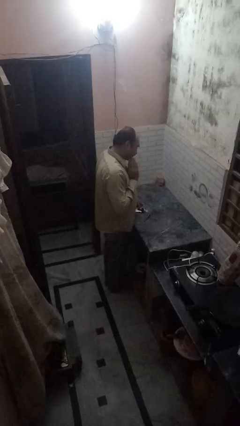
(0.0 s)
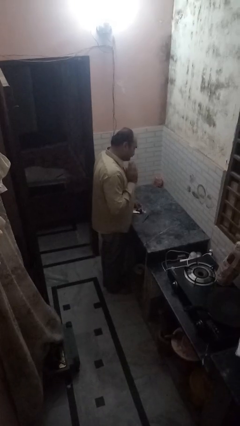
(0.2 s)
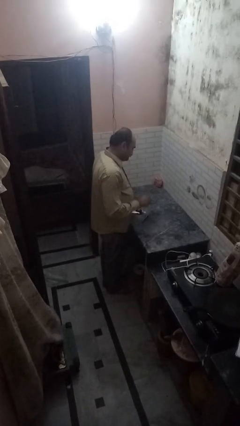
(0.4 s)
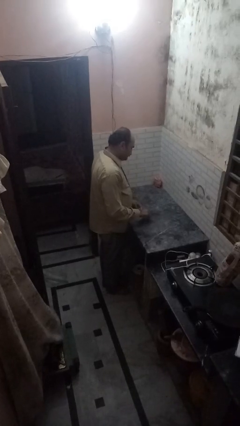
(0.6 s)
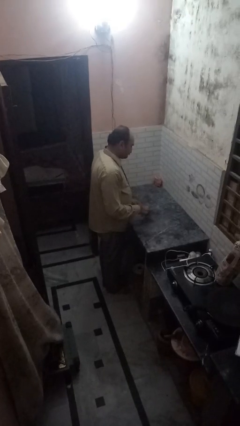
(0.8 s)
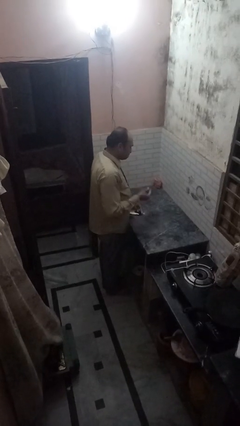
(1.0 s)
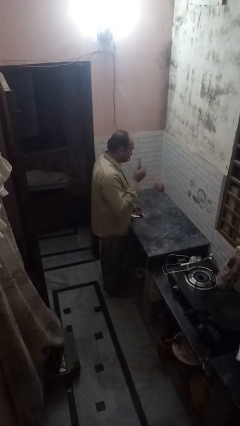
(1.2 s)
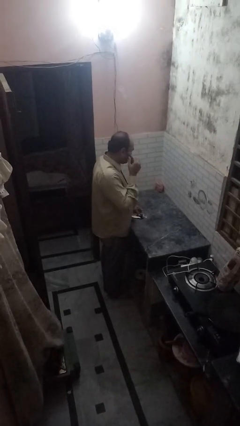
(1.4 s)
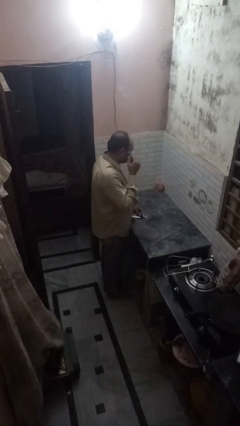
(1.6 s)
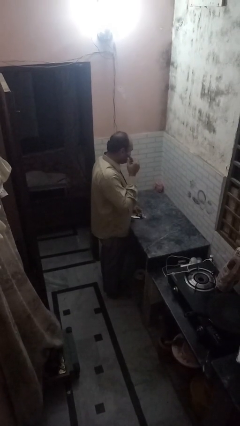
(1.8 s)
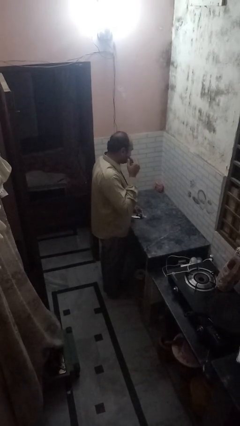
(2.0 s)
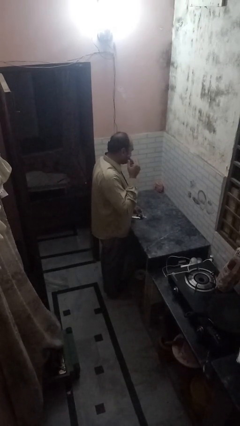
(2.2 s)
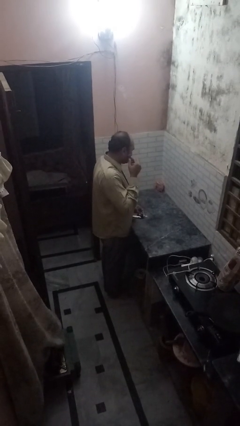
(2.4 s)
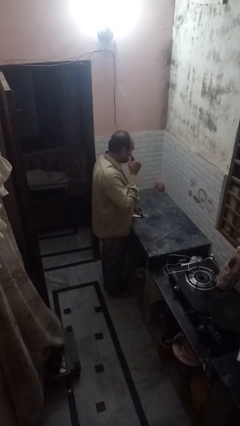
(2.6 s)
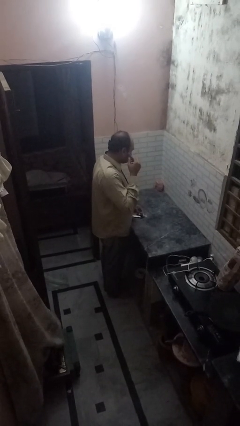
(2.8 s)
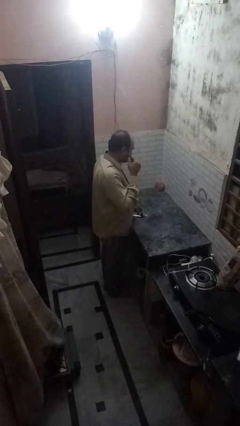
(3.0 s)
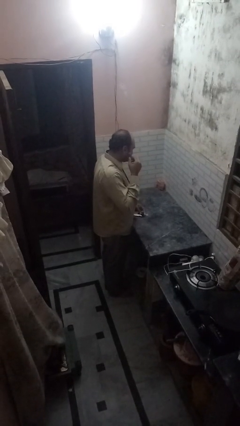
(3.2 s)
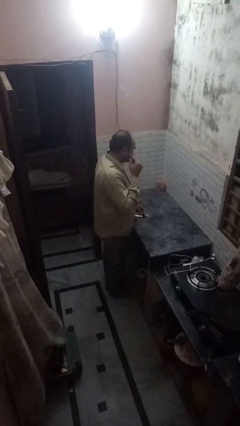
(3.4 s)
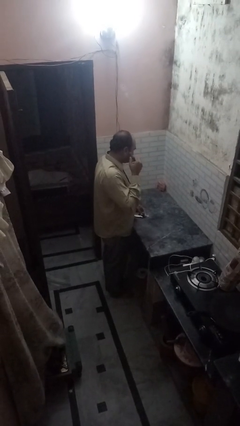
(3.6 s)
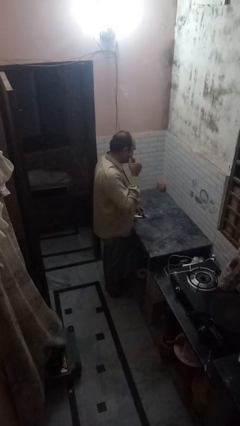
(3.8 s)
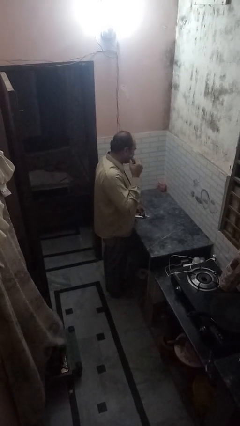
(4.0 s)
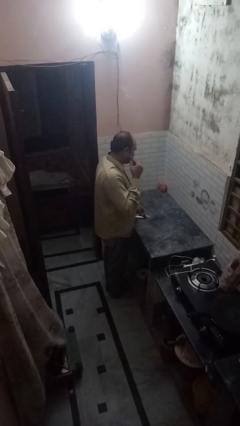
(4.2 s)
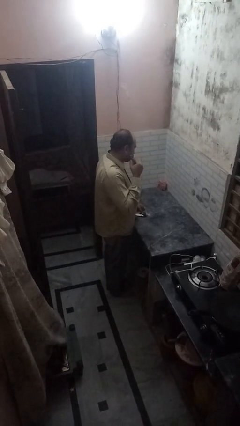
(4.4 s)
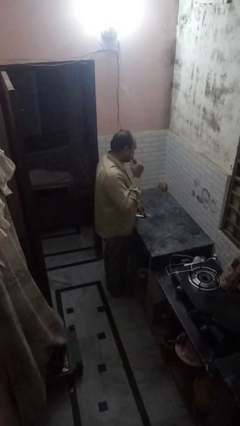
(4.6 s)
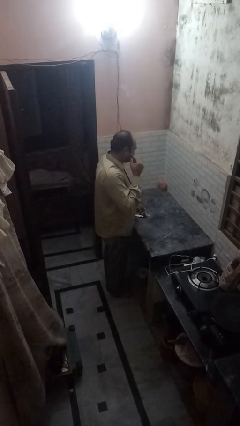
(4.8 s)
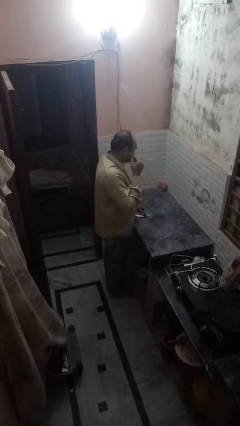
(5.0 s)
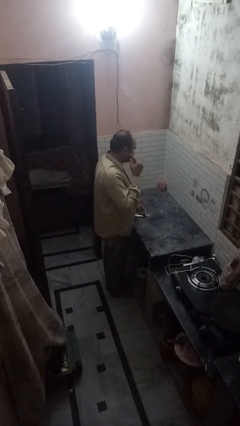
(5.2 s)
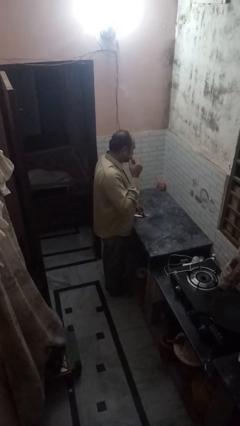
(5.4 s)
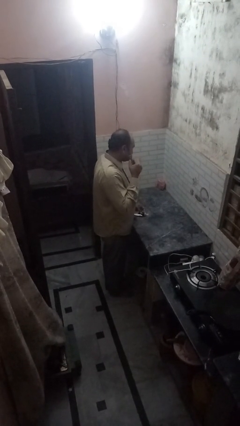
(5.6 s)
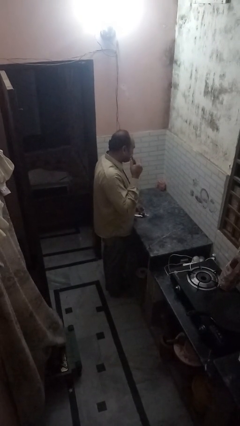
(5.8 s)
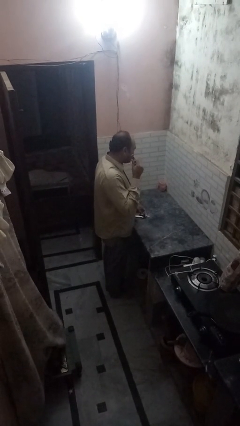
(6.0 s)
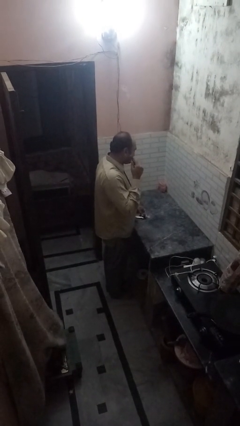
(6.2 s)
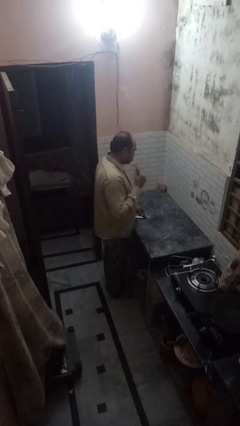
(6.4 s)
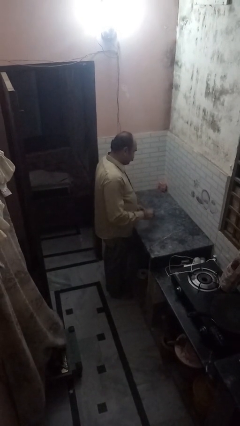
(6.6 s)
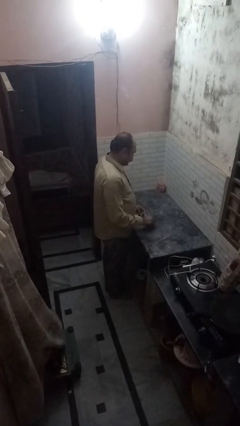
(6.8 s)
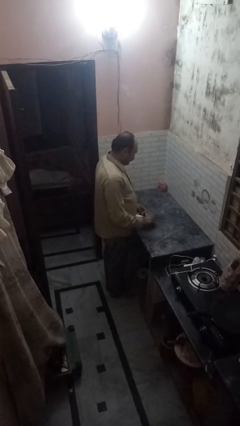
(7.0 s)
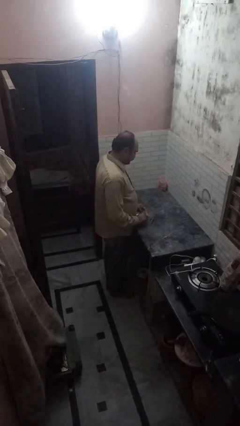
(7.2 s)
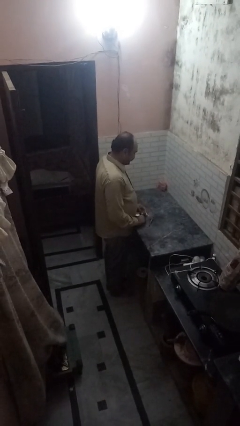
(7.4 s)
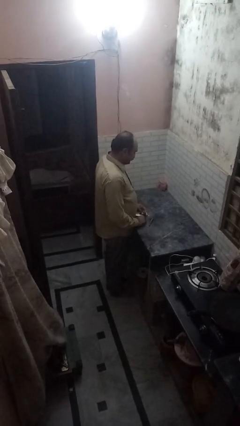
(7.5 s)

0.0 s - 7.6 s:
person shaves face

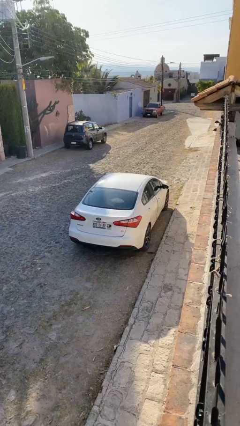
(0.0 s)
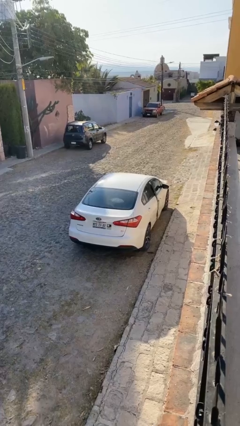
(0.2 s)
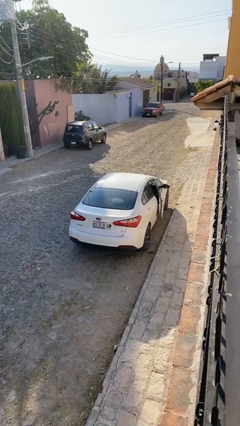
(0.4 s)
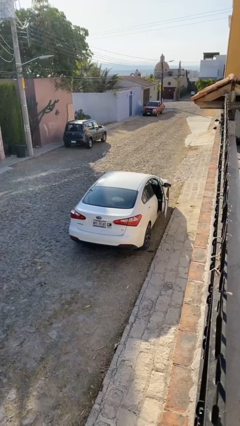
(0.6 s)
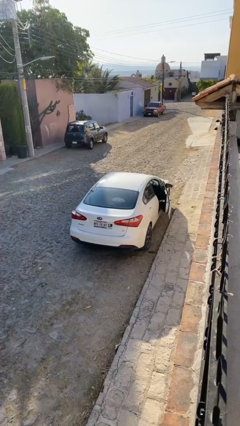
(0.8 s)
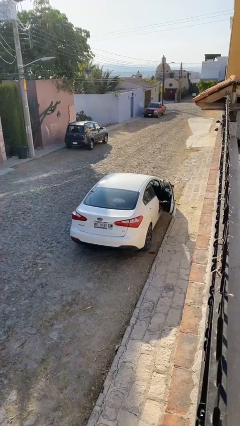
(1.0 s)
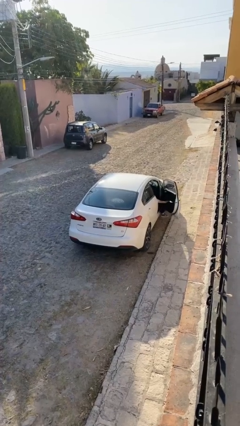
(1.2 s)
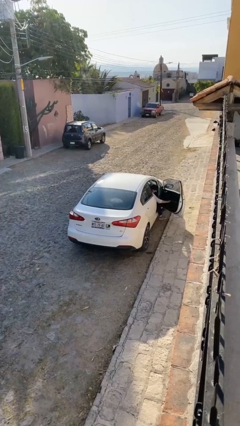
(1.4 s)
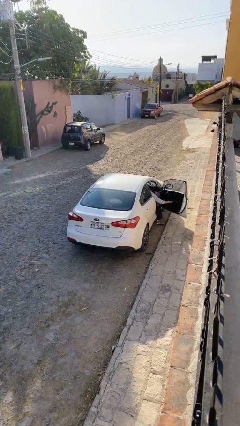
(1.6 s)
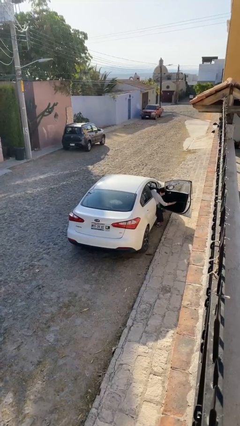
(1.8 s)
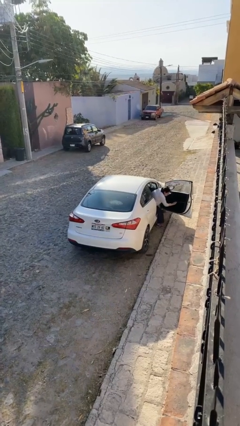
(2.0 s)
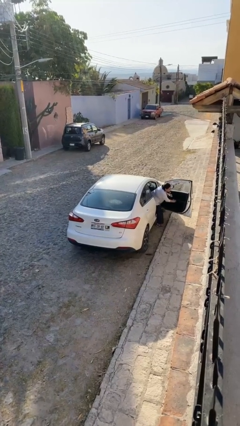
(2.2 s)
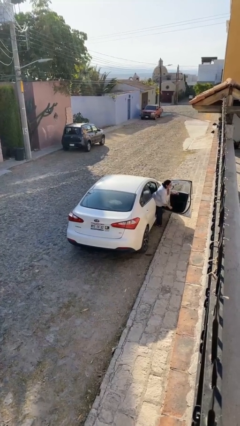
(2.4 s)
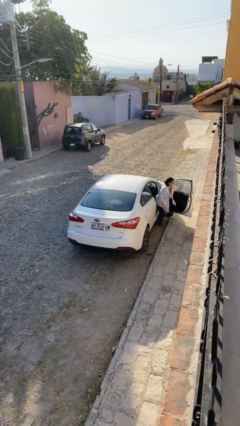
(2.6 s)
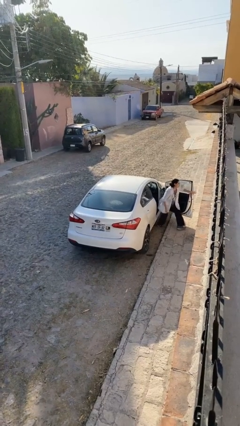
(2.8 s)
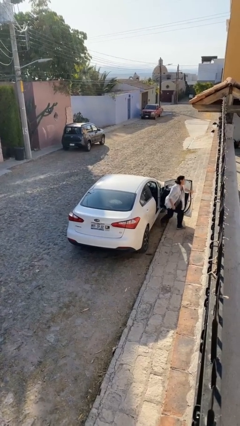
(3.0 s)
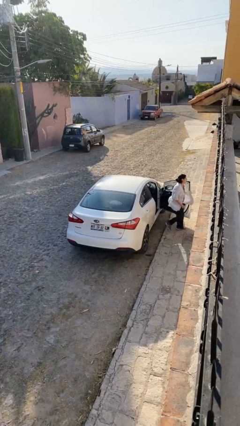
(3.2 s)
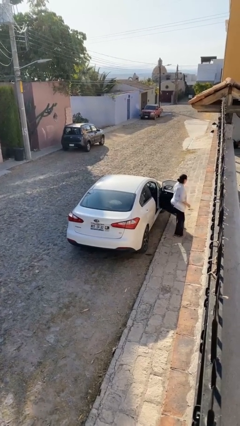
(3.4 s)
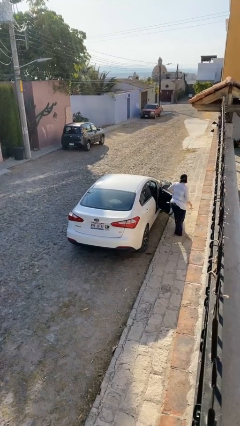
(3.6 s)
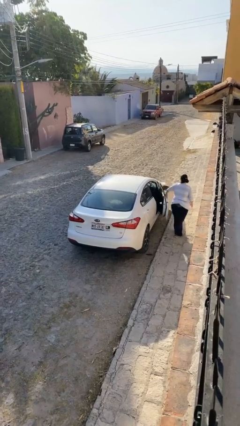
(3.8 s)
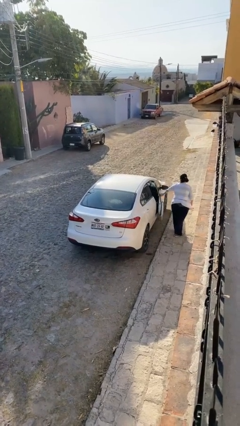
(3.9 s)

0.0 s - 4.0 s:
car drops off person

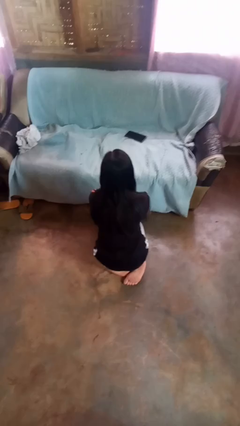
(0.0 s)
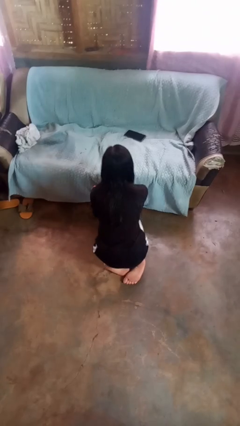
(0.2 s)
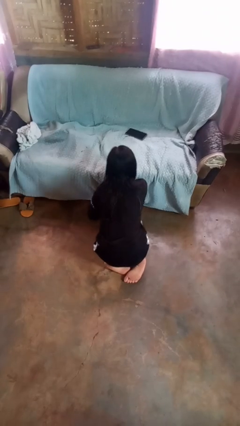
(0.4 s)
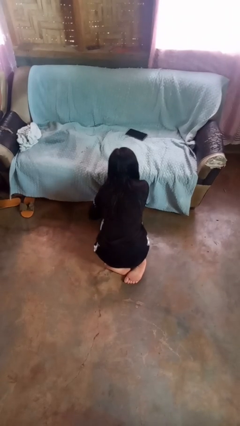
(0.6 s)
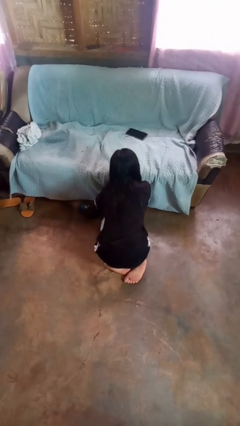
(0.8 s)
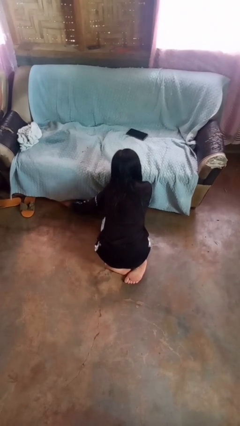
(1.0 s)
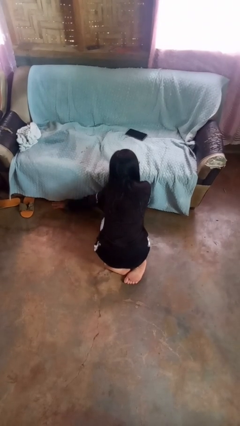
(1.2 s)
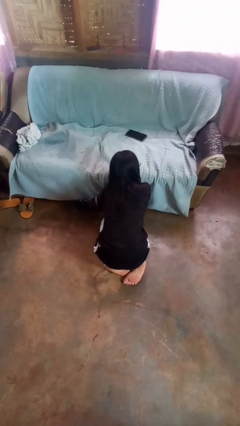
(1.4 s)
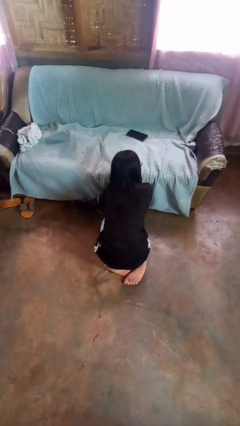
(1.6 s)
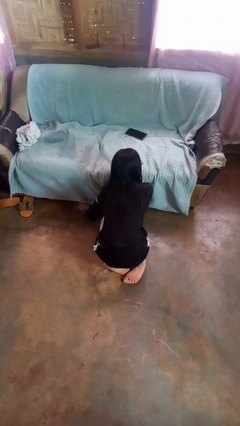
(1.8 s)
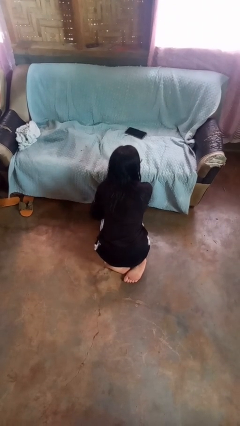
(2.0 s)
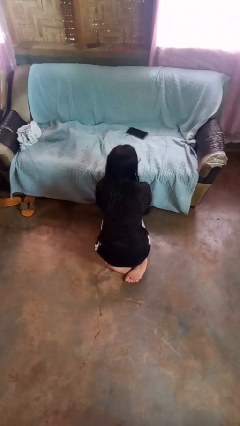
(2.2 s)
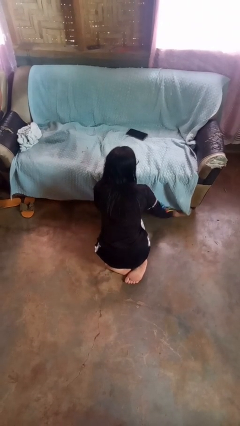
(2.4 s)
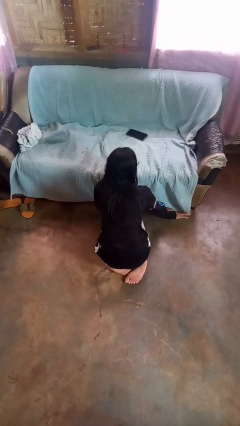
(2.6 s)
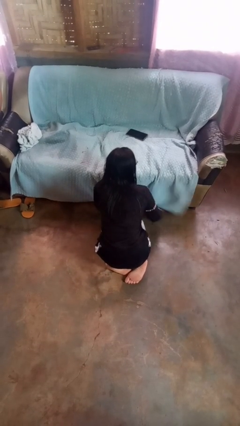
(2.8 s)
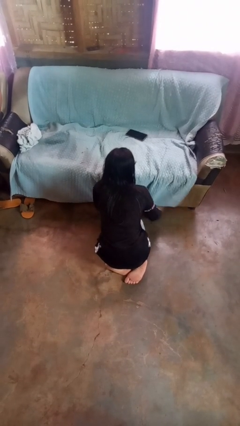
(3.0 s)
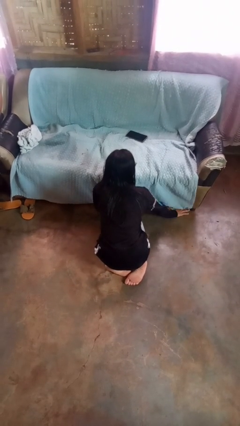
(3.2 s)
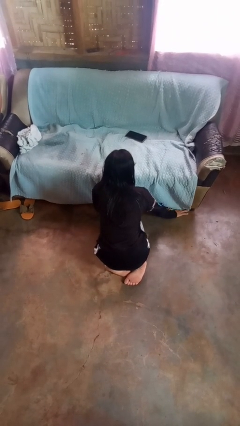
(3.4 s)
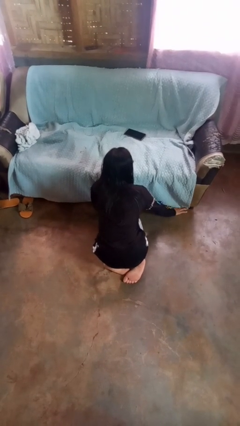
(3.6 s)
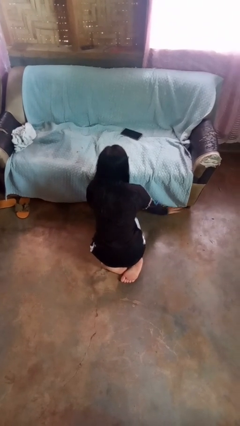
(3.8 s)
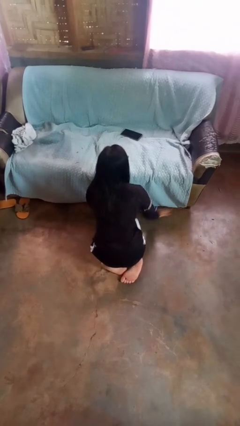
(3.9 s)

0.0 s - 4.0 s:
person searches under couch

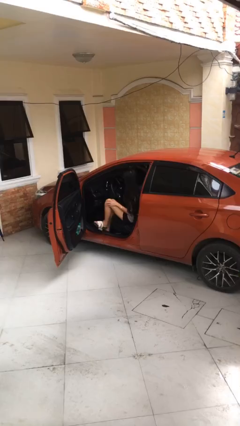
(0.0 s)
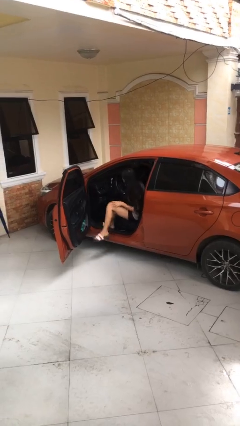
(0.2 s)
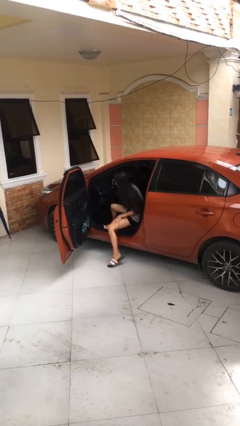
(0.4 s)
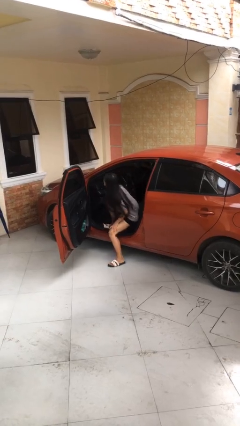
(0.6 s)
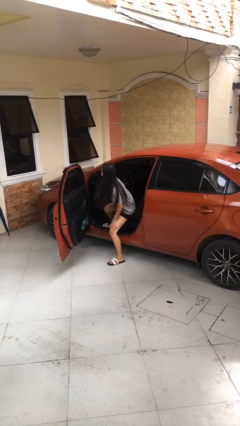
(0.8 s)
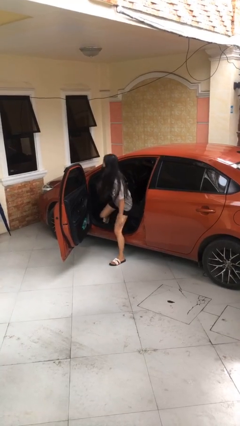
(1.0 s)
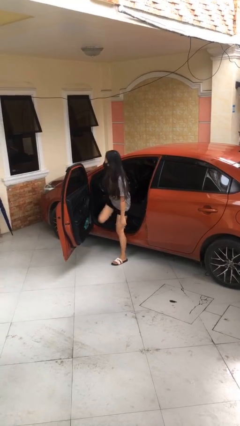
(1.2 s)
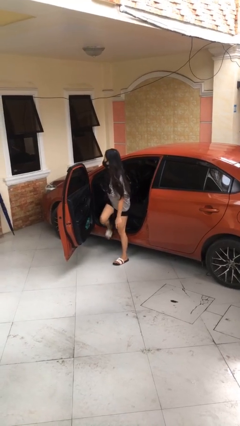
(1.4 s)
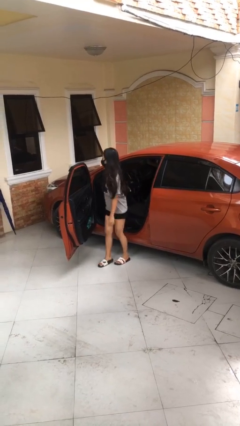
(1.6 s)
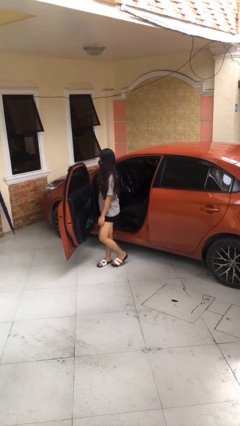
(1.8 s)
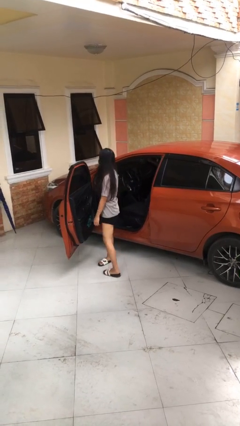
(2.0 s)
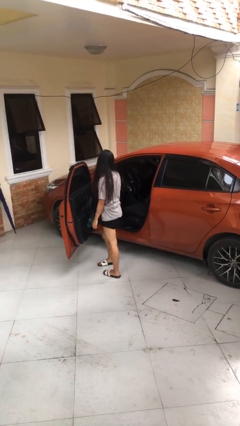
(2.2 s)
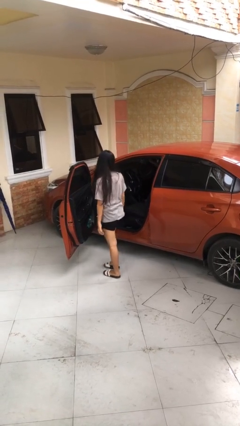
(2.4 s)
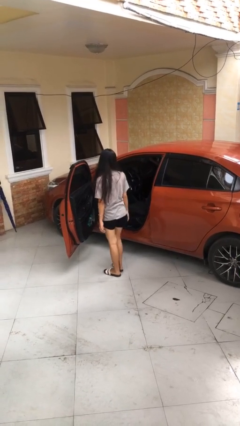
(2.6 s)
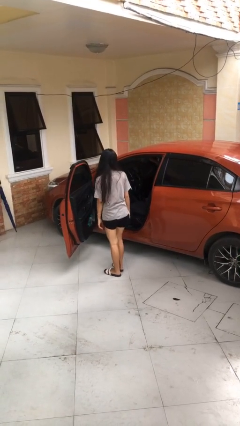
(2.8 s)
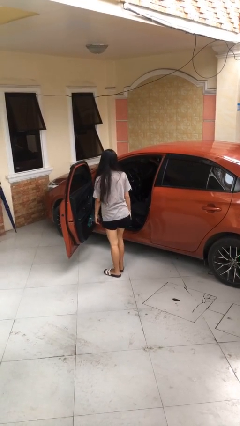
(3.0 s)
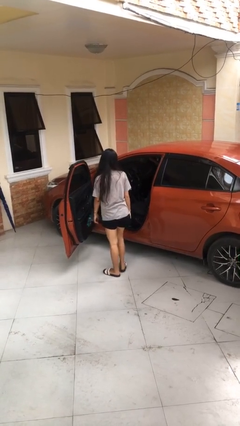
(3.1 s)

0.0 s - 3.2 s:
person exits car
